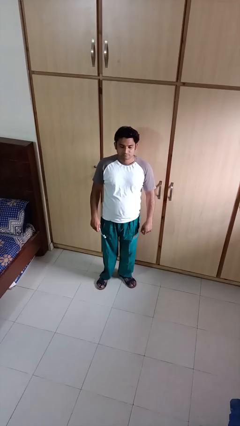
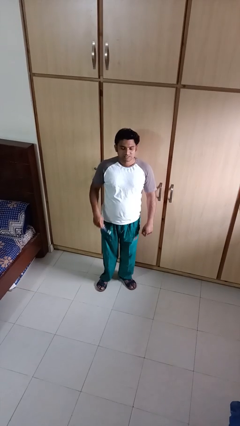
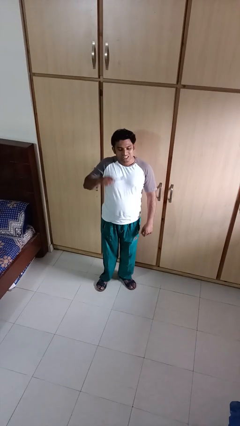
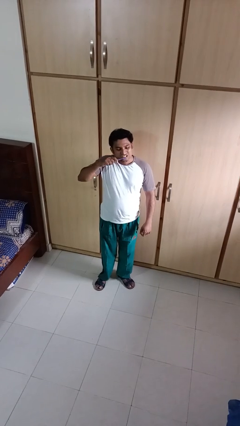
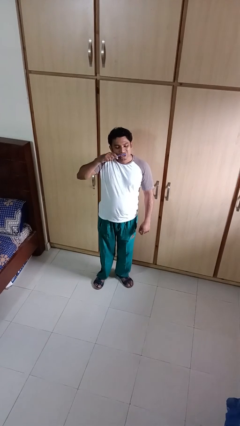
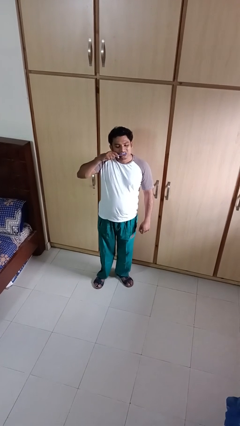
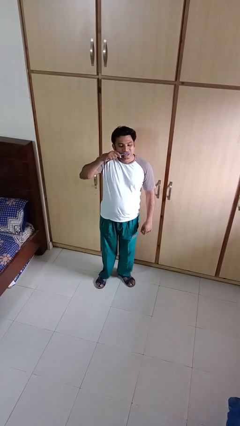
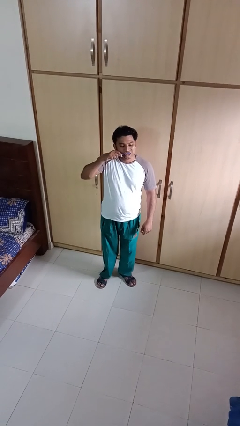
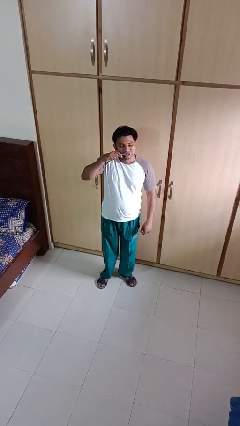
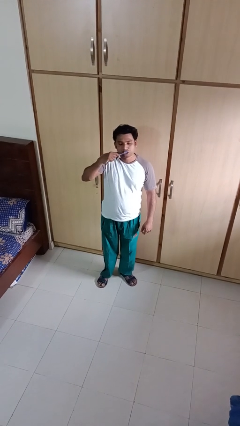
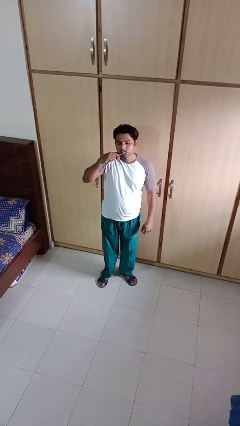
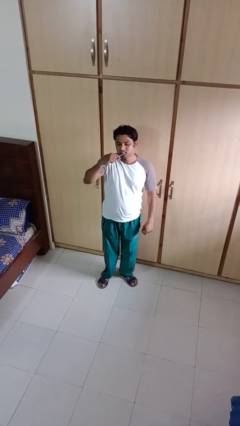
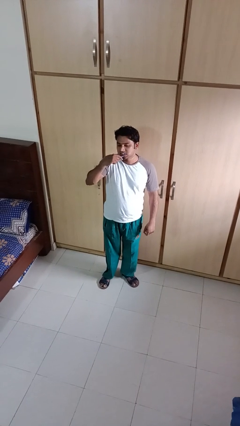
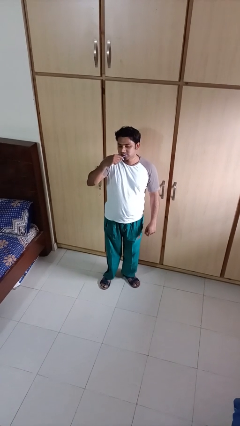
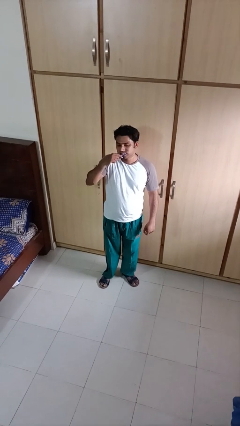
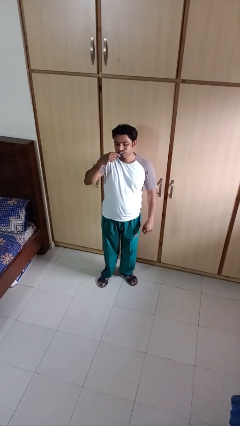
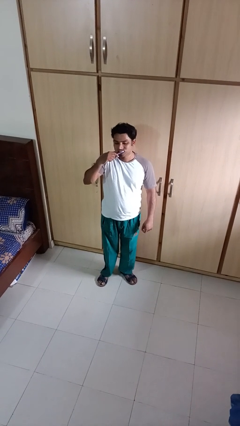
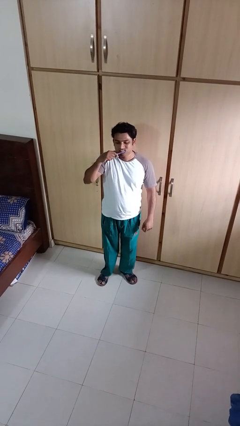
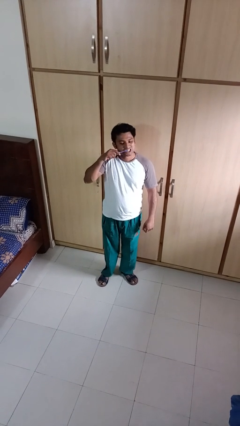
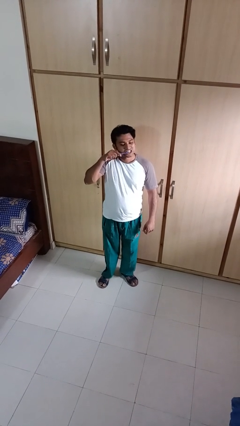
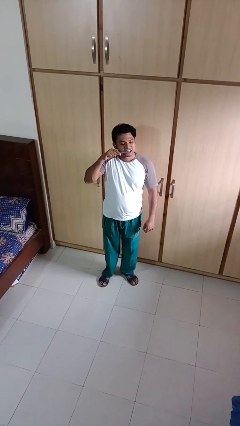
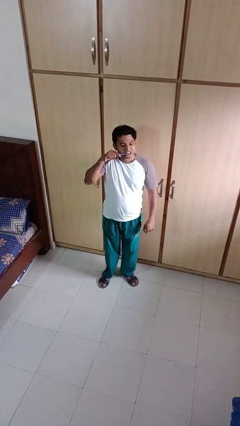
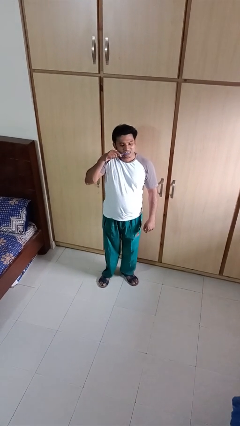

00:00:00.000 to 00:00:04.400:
person brushes teeth

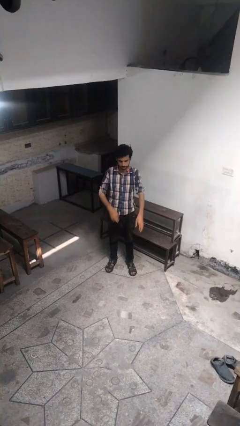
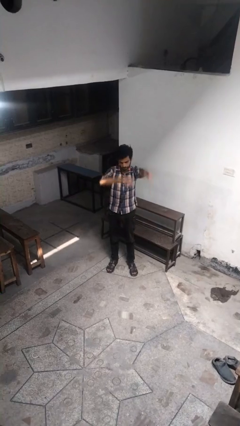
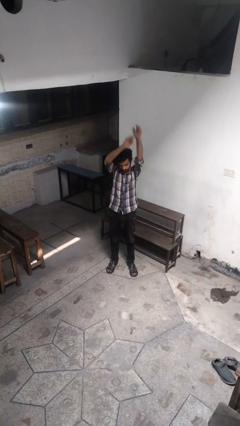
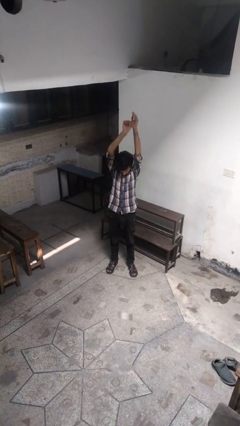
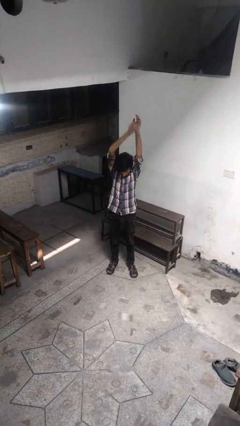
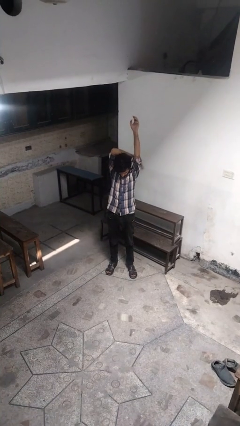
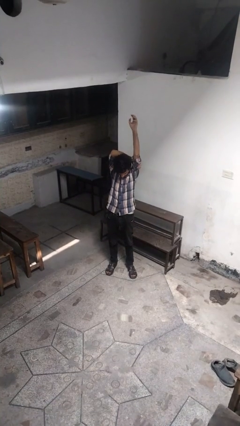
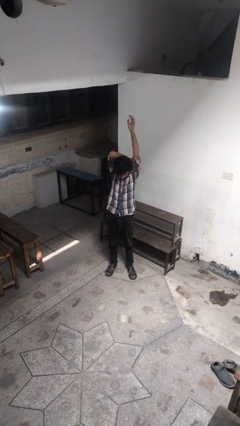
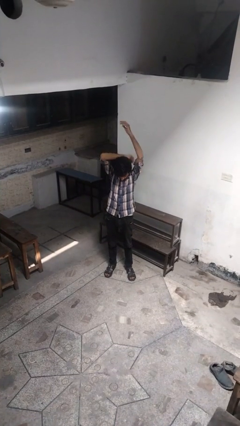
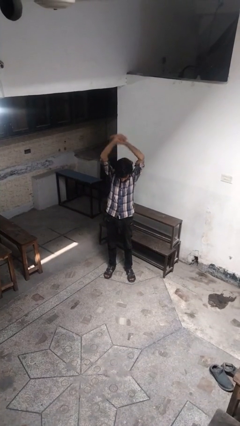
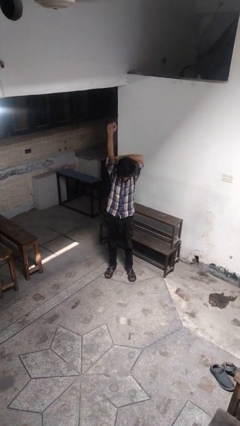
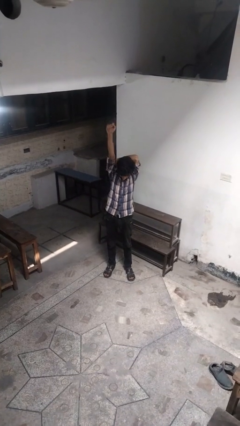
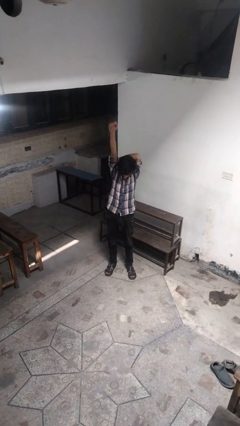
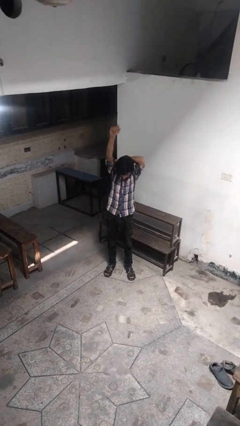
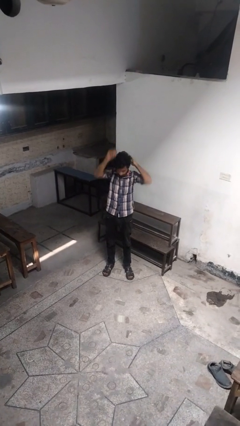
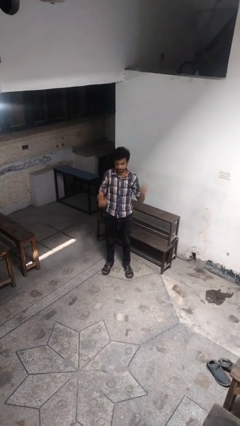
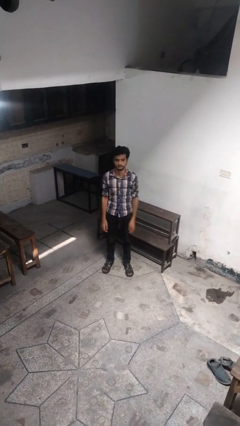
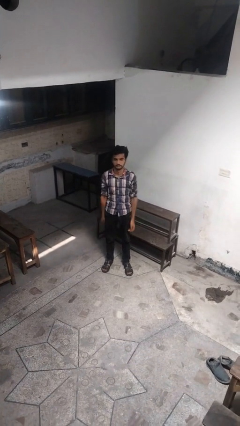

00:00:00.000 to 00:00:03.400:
person stretches arms over head

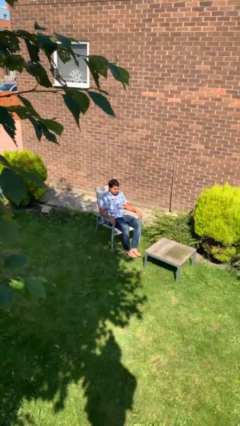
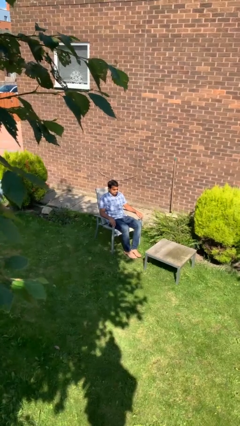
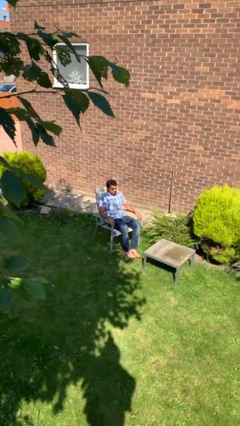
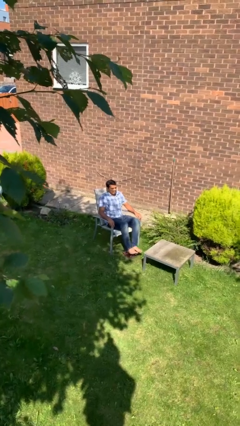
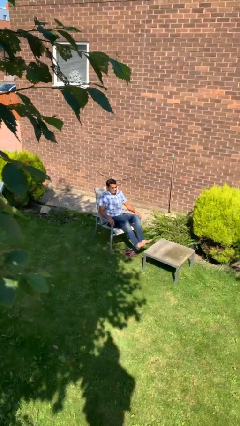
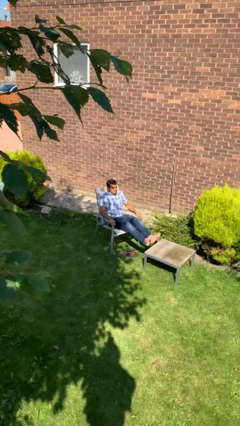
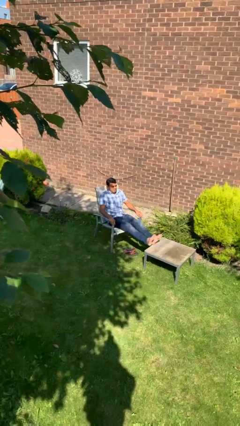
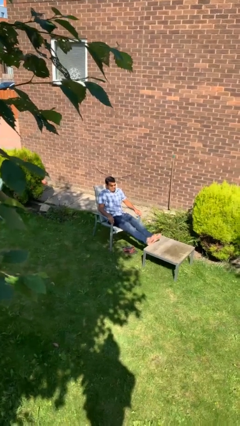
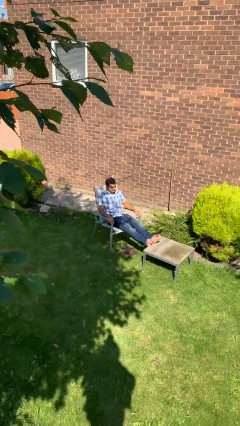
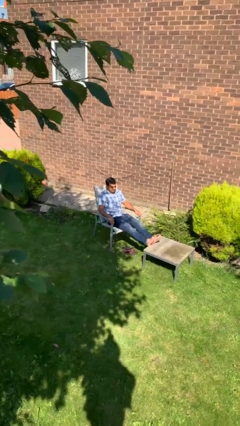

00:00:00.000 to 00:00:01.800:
person puts feet up

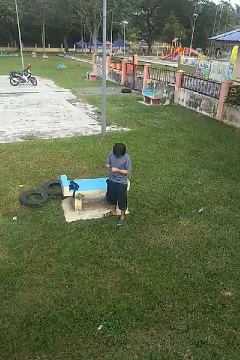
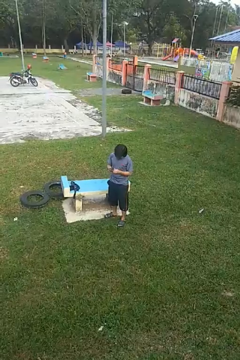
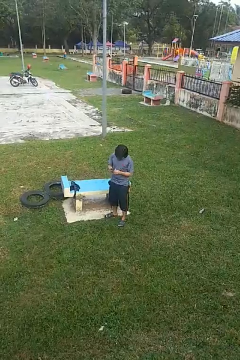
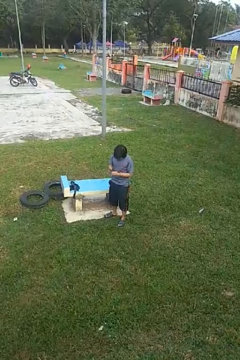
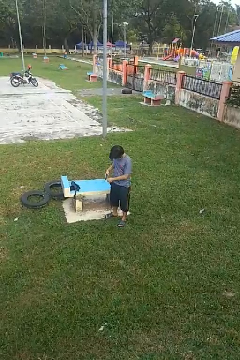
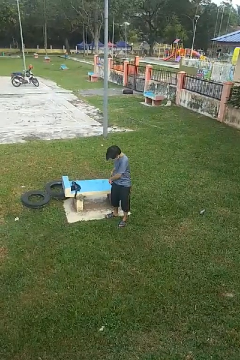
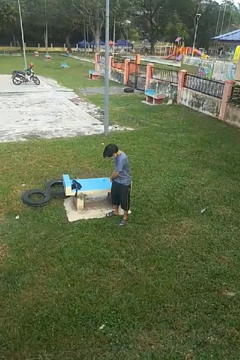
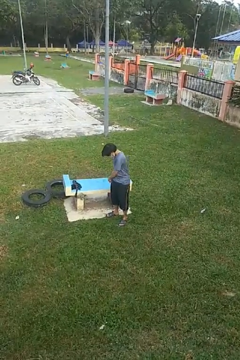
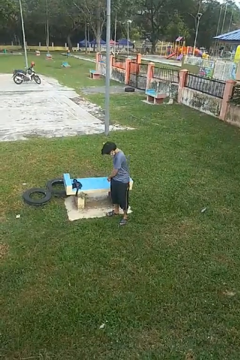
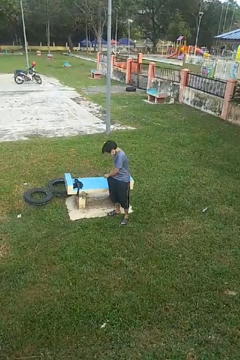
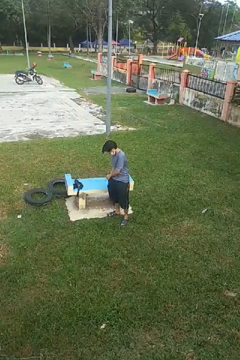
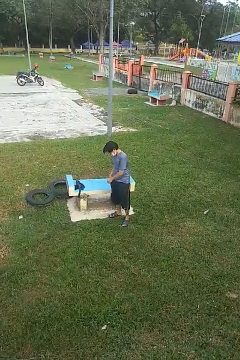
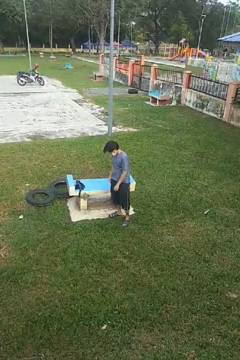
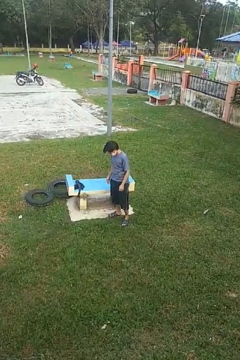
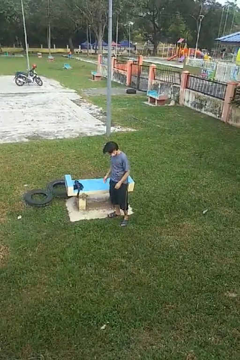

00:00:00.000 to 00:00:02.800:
person puts phone into pocket

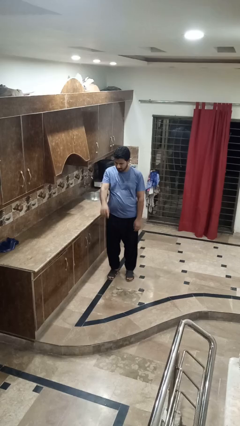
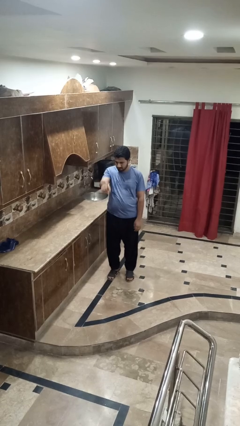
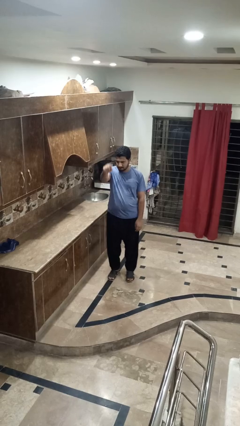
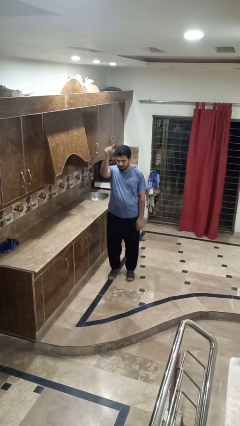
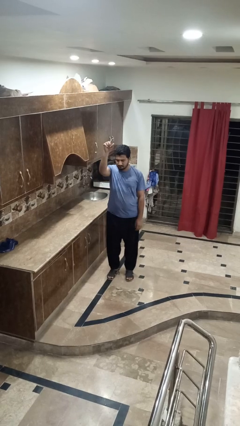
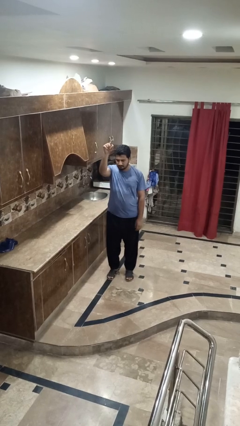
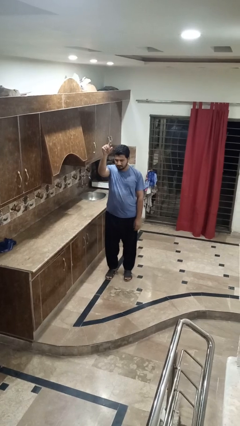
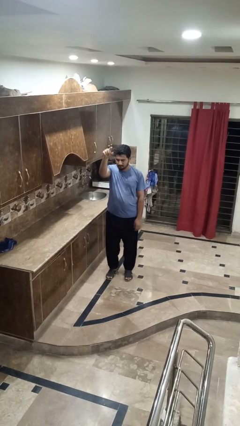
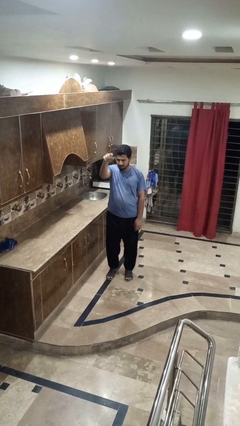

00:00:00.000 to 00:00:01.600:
person gestures swipe up

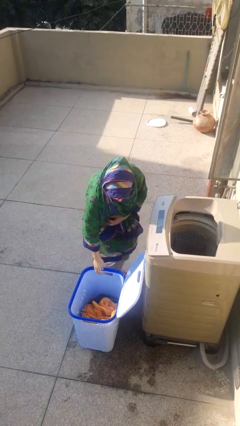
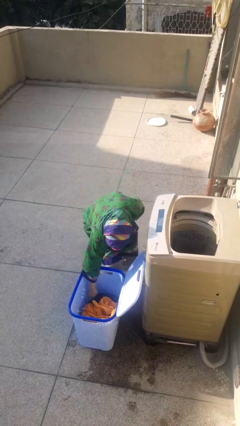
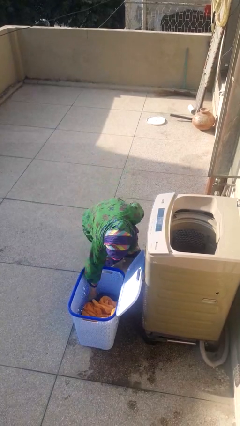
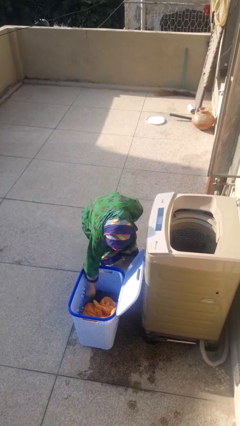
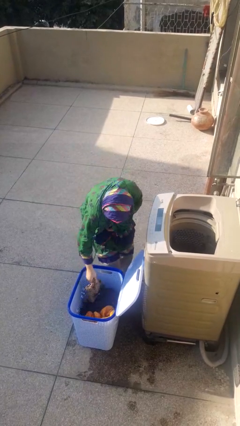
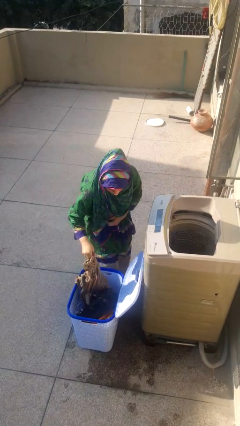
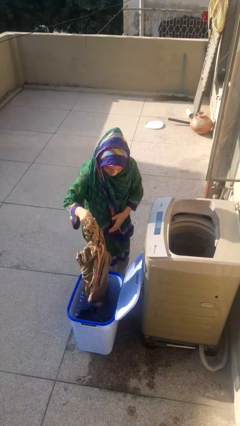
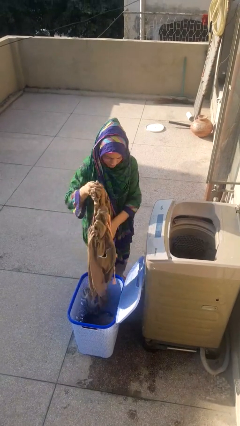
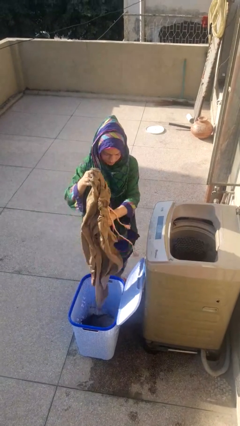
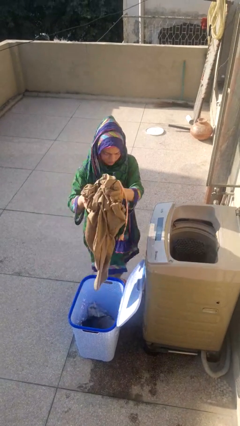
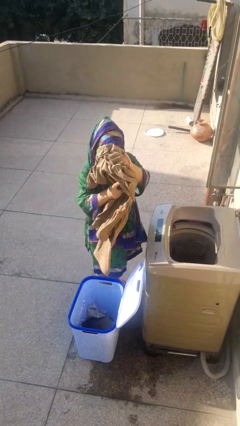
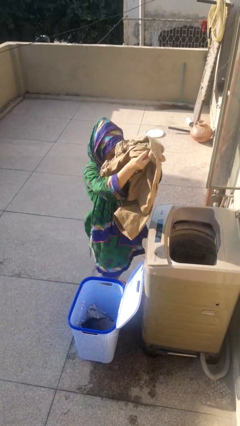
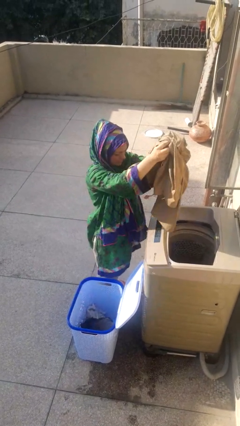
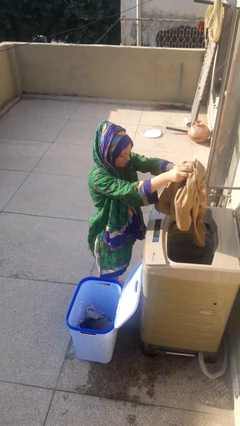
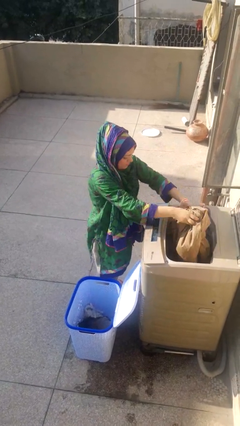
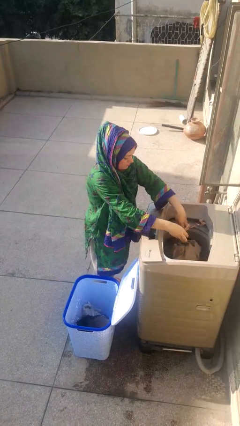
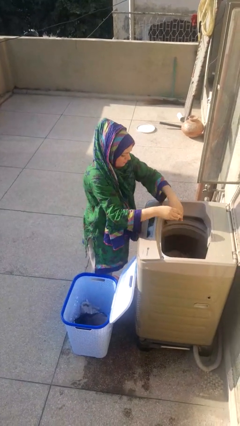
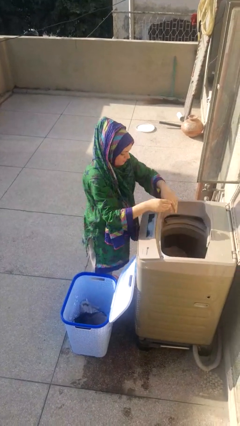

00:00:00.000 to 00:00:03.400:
person loads clotheswasher

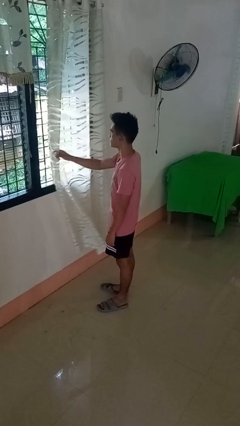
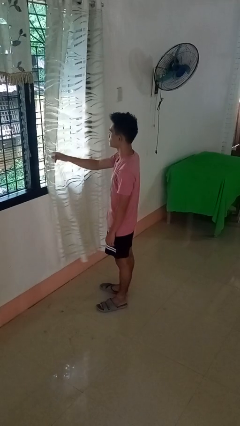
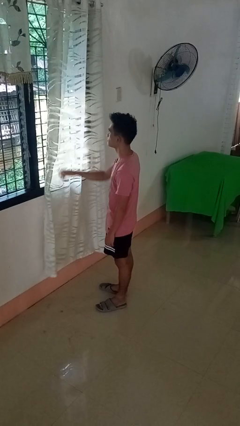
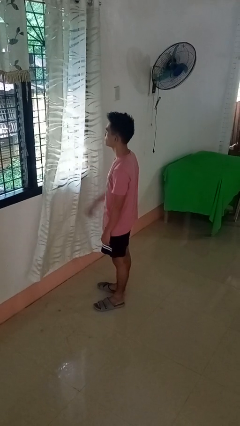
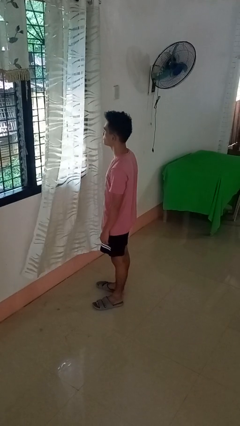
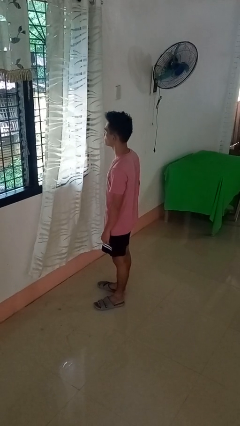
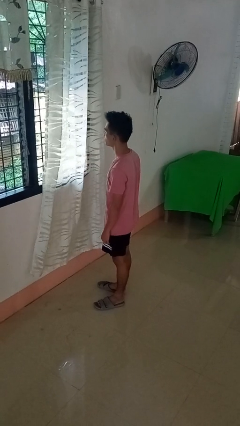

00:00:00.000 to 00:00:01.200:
person closes curtains
